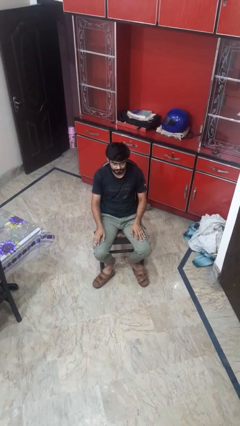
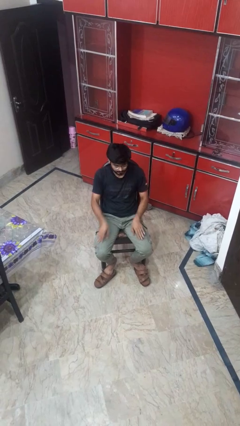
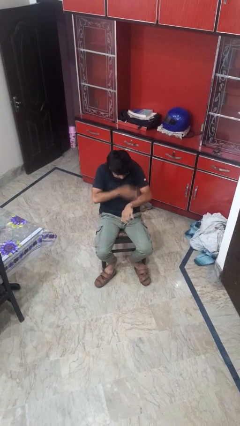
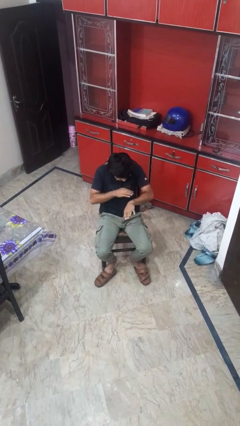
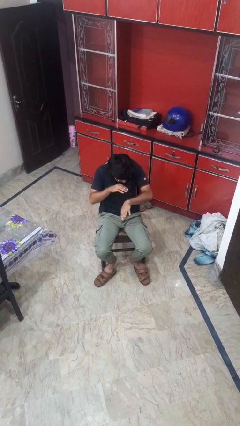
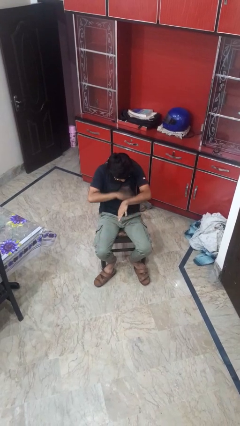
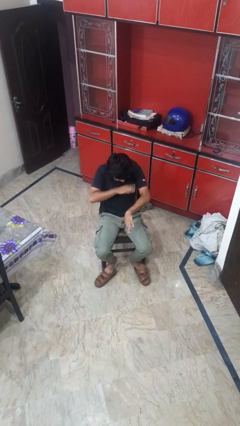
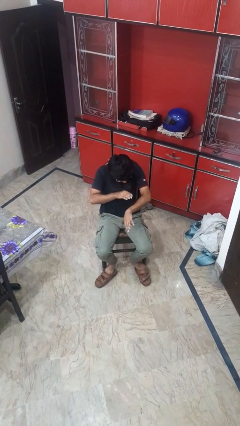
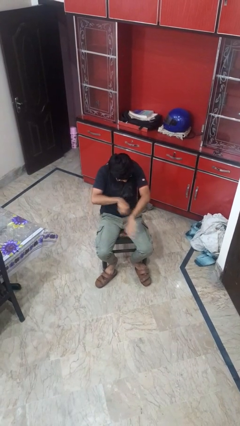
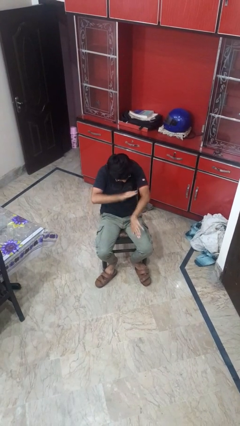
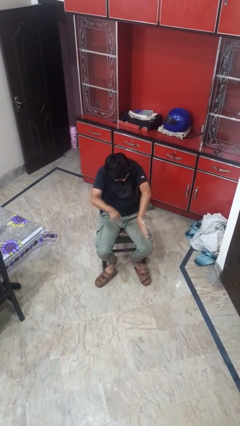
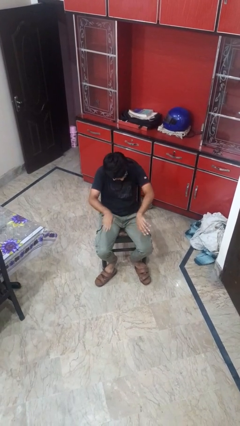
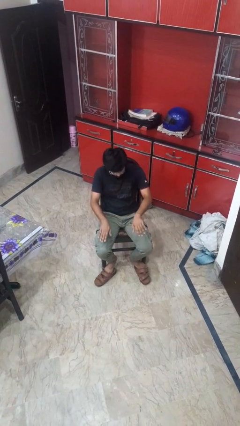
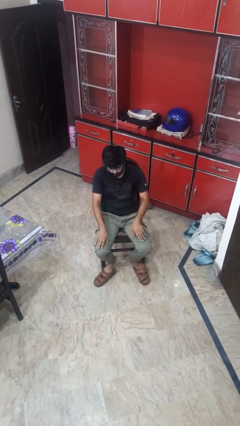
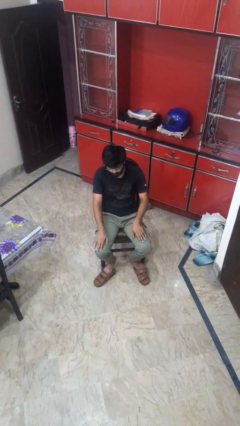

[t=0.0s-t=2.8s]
person swats bug

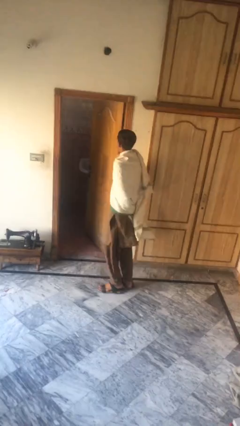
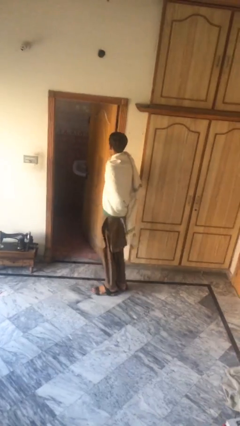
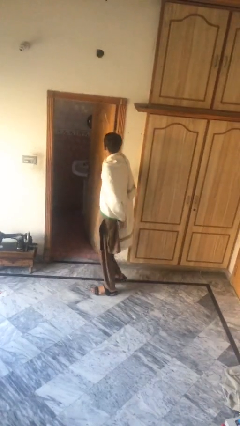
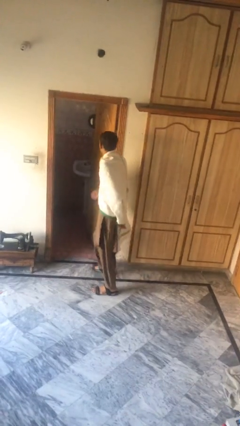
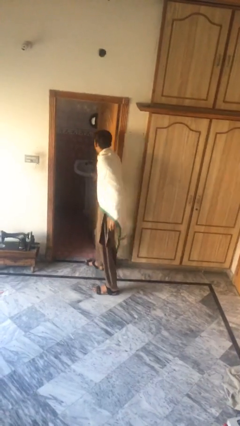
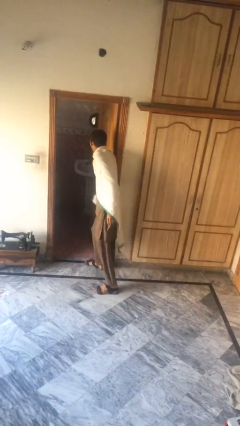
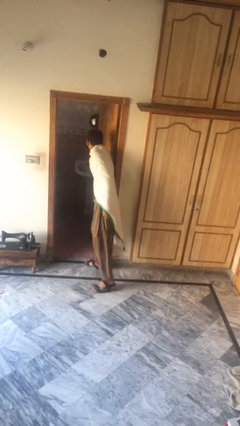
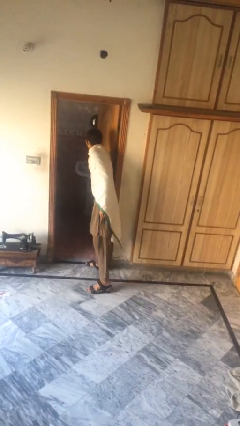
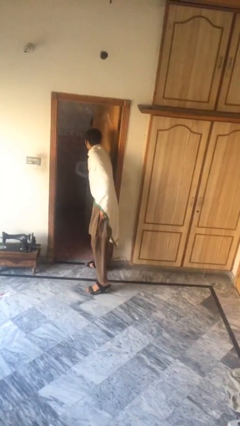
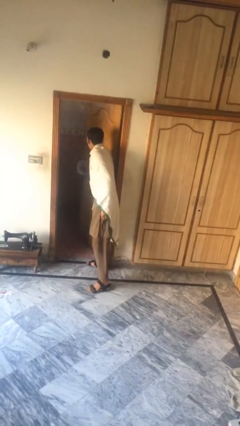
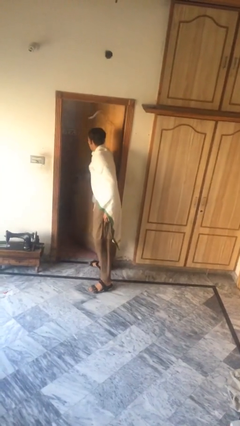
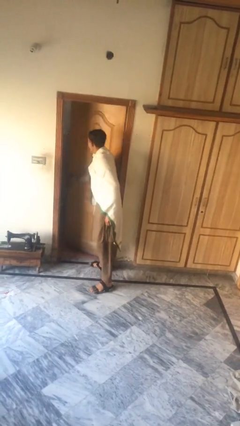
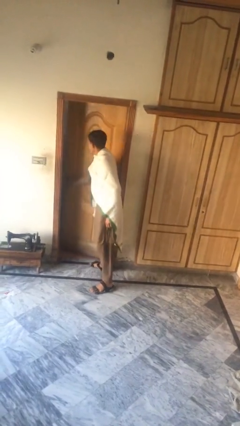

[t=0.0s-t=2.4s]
person closes facility door

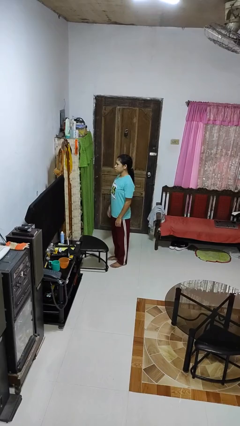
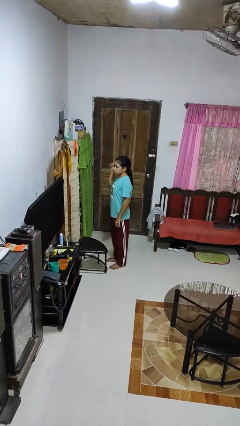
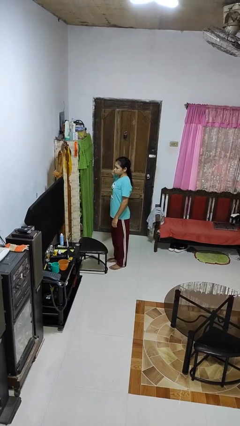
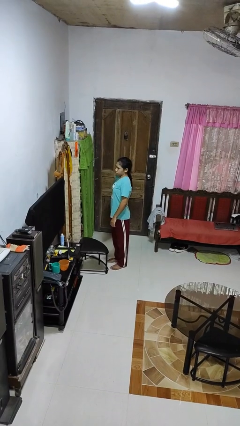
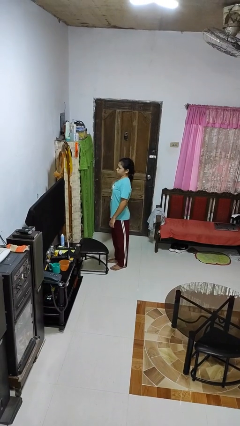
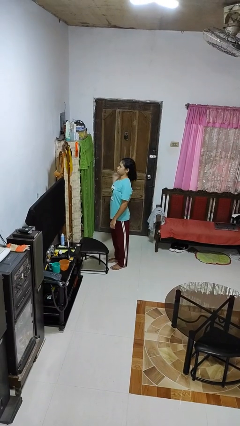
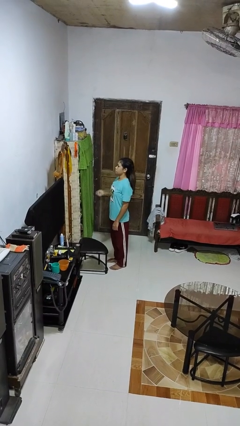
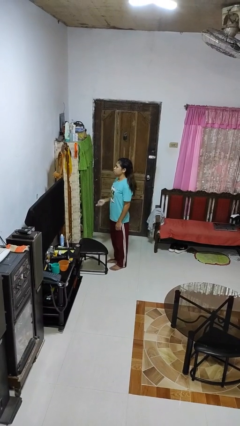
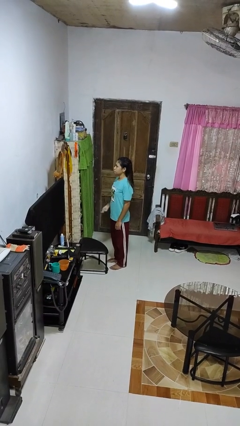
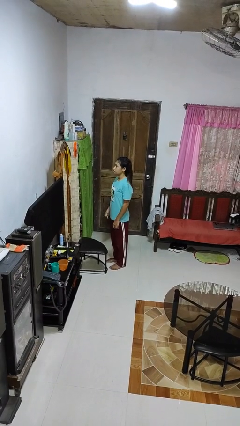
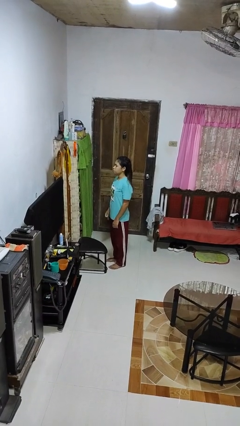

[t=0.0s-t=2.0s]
person takes off hairtie

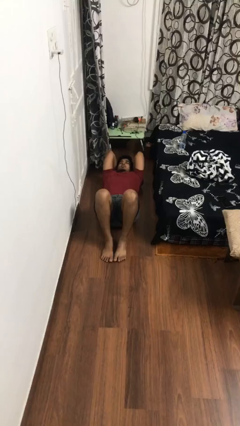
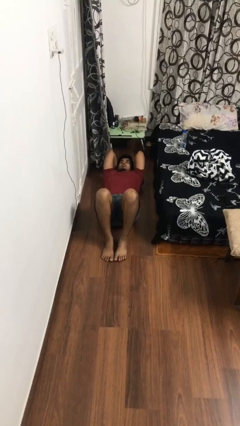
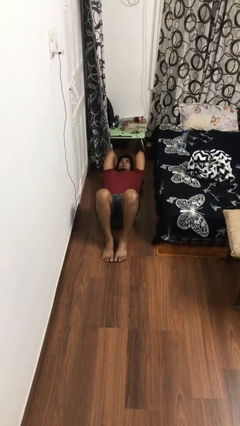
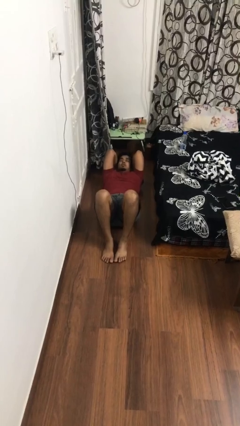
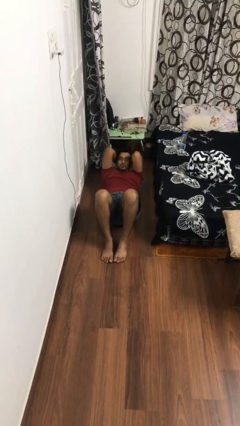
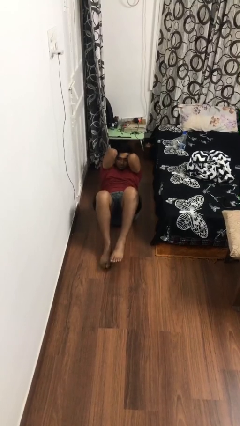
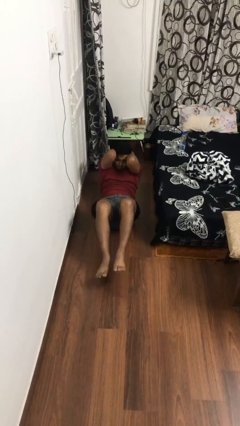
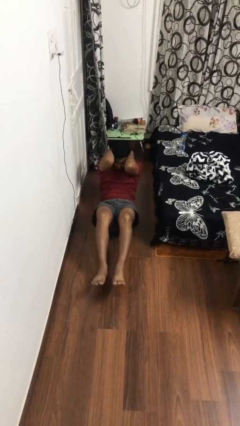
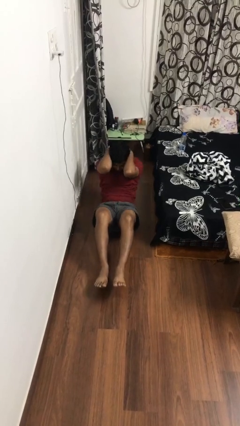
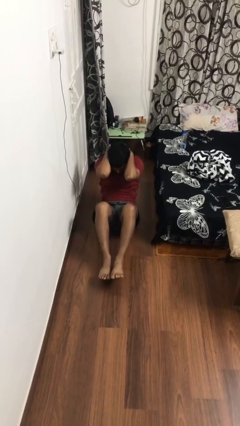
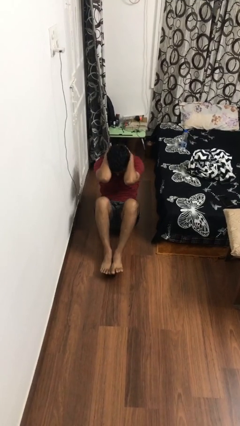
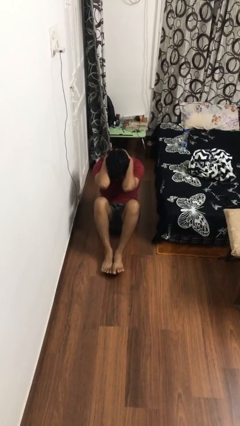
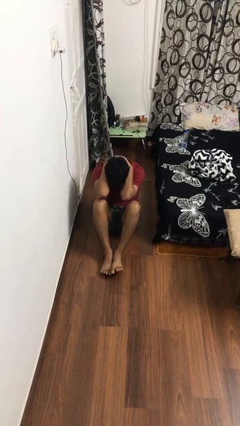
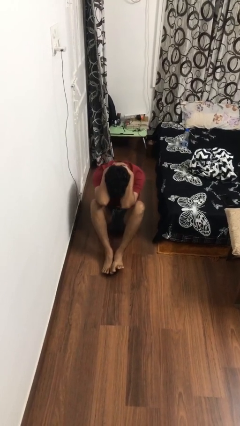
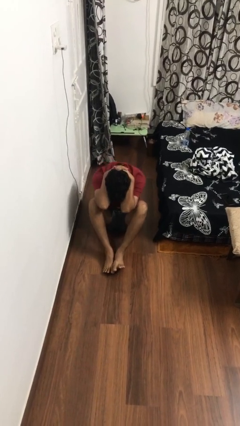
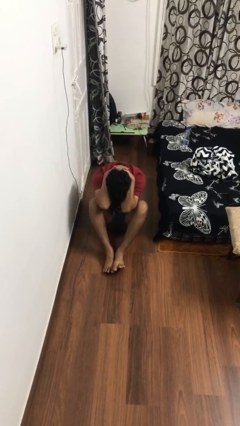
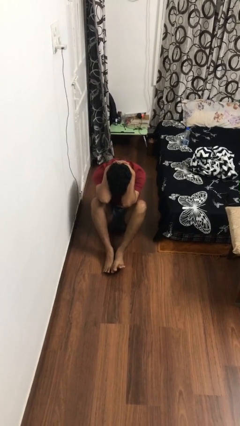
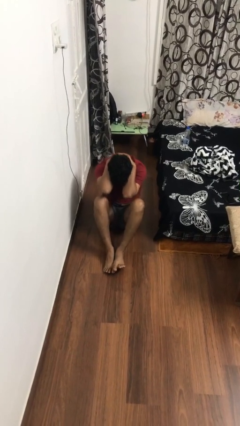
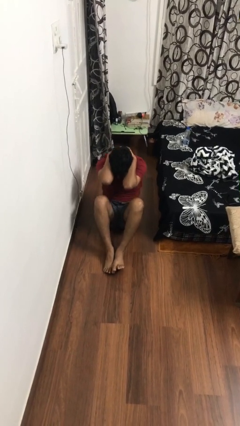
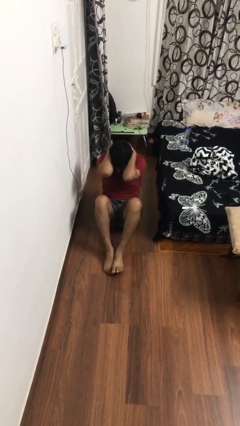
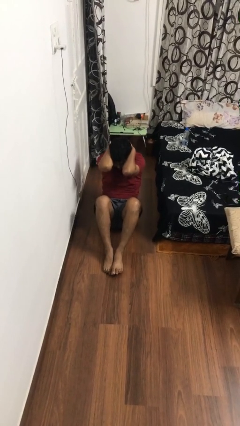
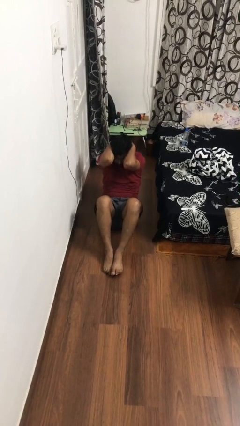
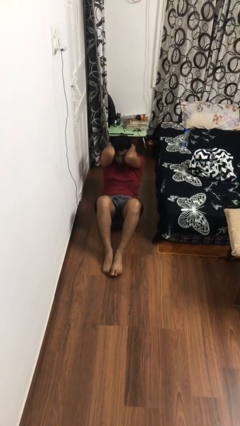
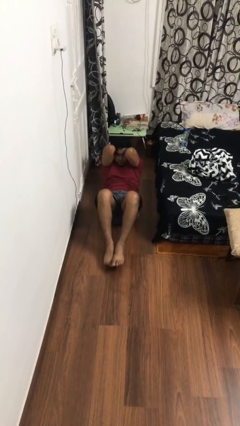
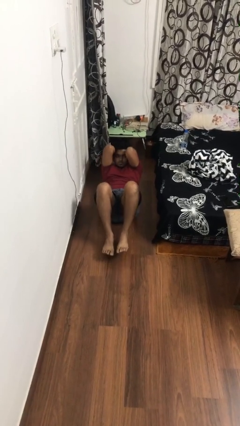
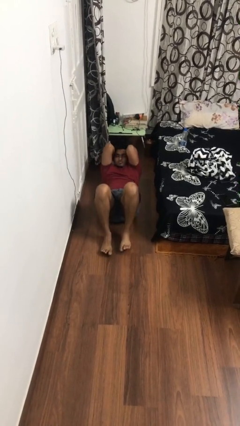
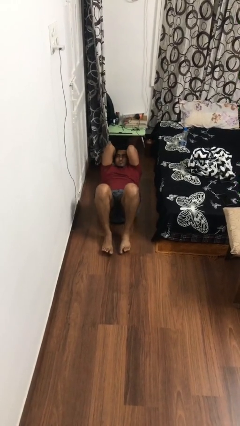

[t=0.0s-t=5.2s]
person exercises with situp

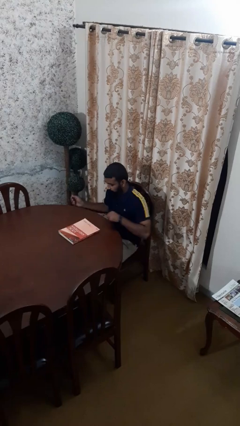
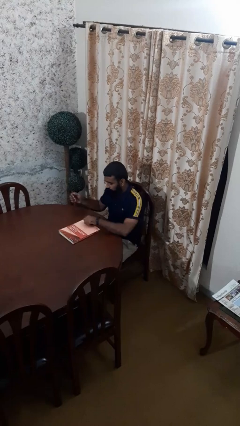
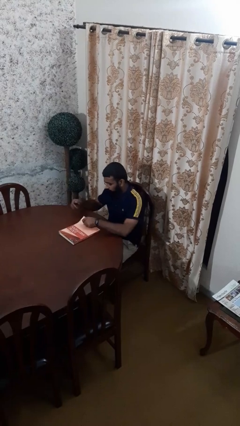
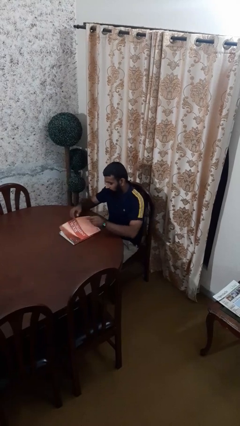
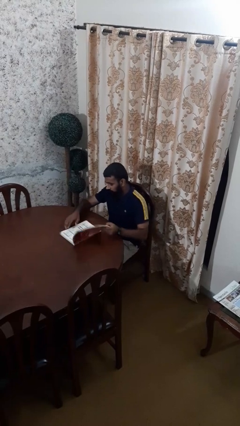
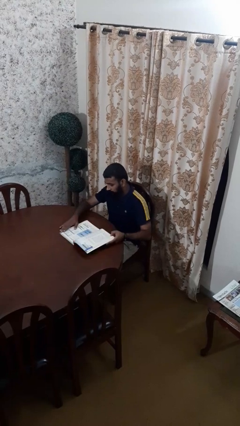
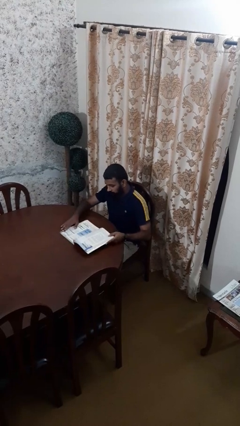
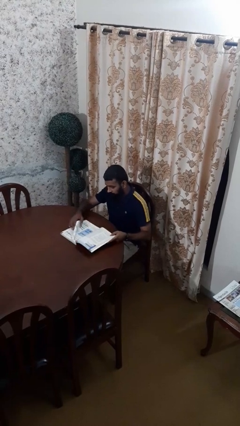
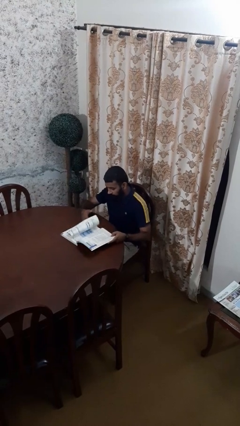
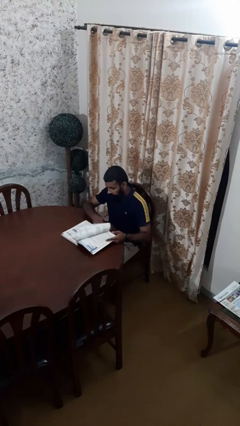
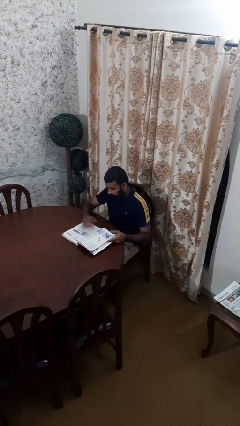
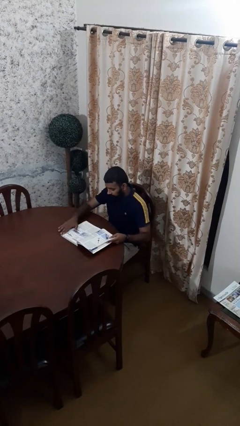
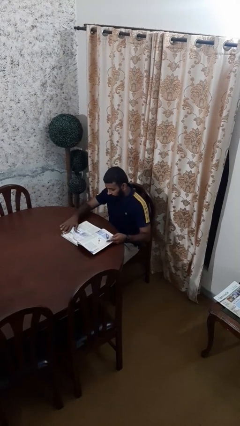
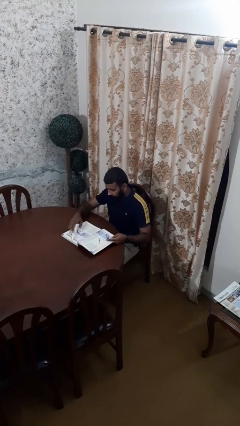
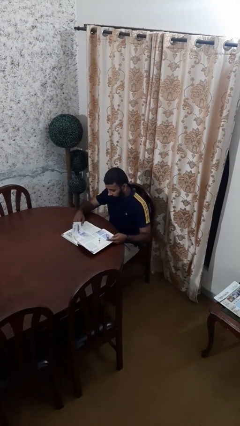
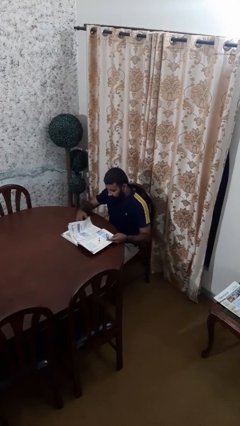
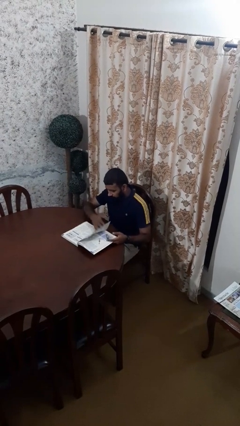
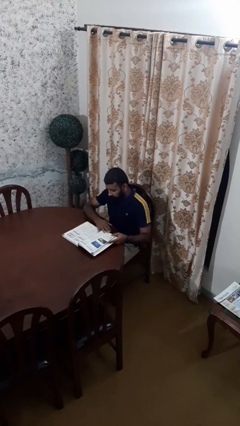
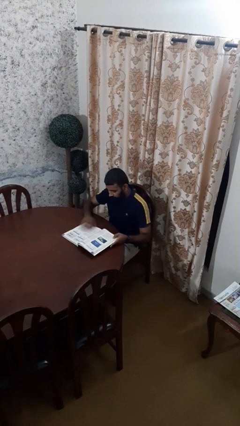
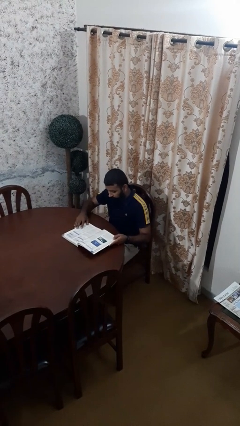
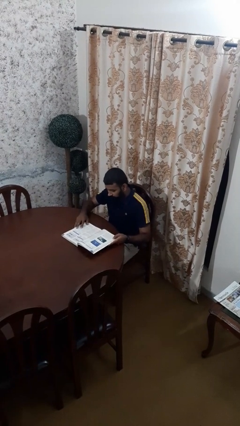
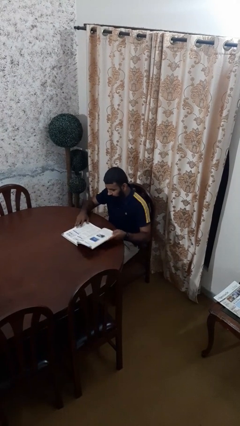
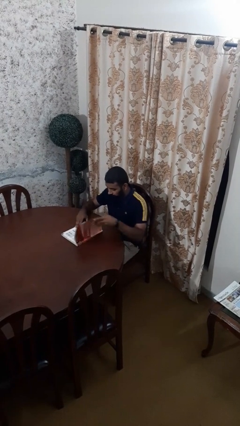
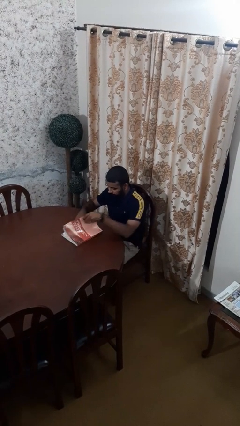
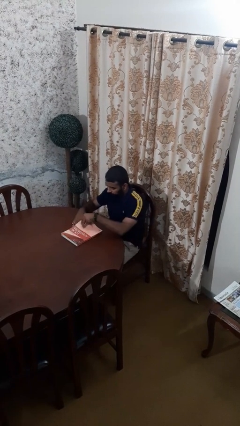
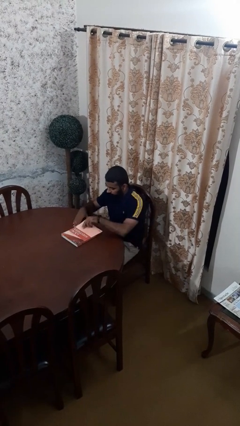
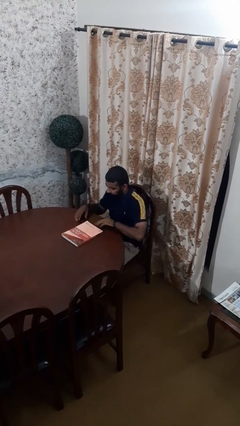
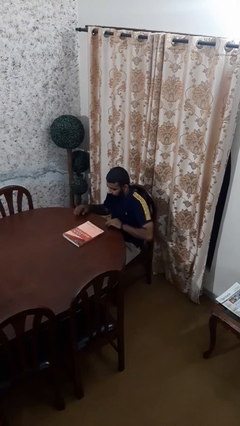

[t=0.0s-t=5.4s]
person reads book
